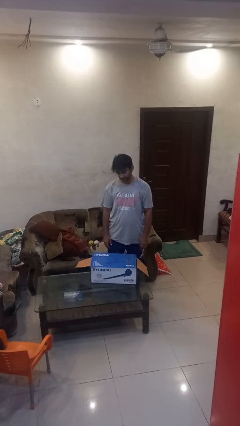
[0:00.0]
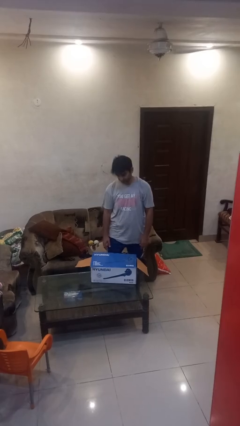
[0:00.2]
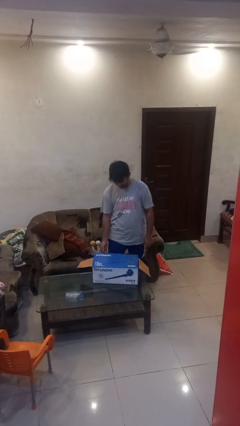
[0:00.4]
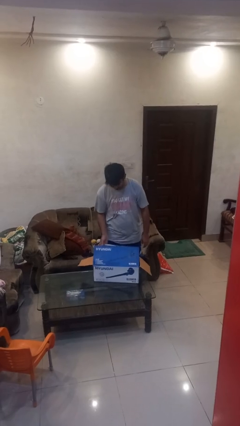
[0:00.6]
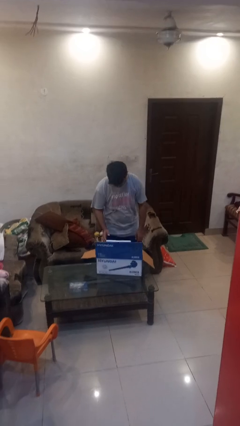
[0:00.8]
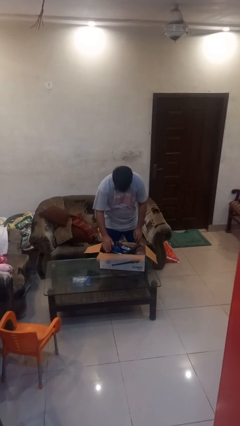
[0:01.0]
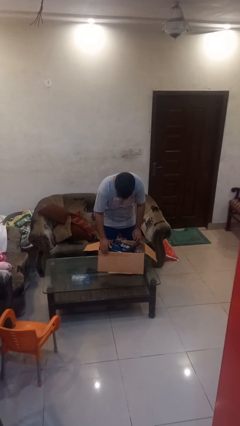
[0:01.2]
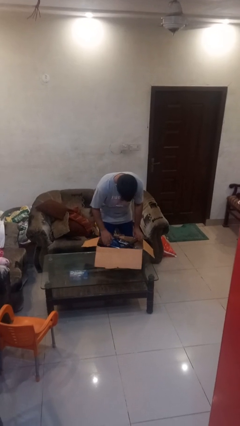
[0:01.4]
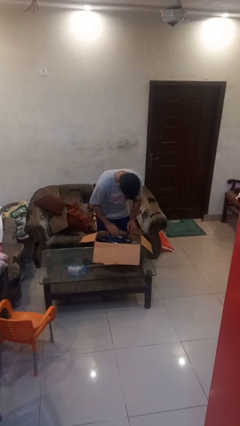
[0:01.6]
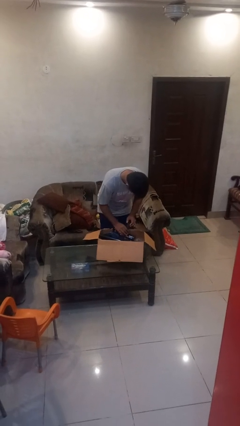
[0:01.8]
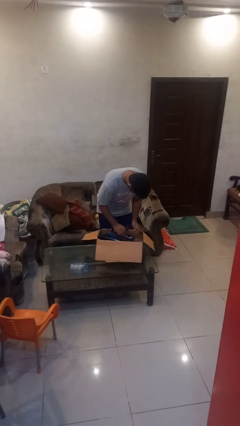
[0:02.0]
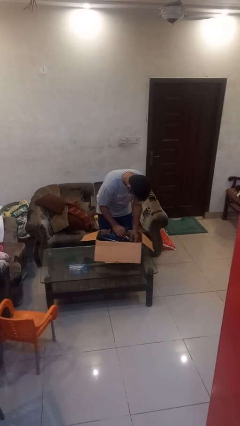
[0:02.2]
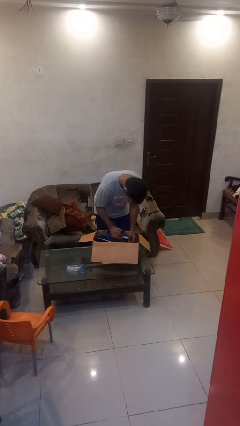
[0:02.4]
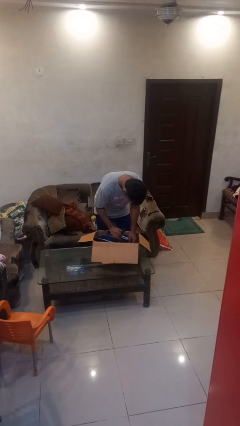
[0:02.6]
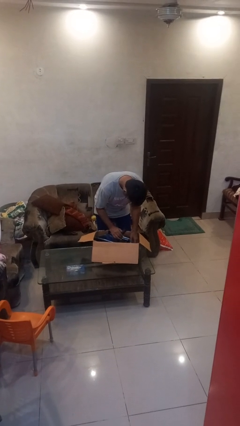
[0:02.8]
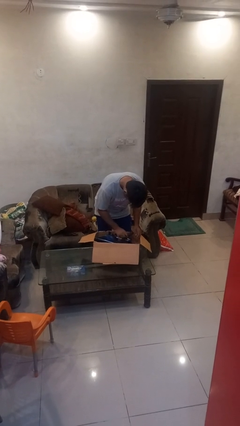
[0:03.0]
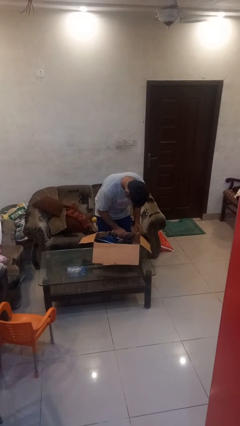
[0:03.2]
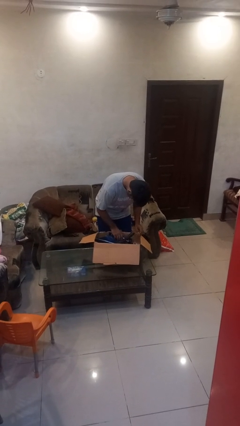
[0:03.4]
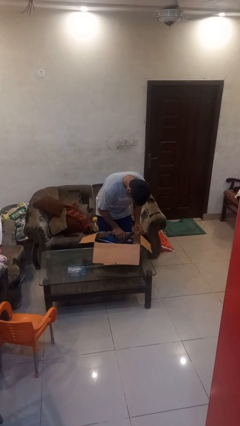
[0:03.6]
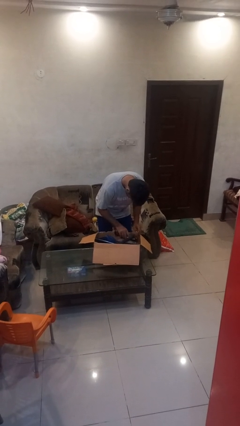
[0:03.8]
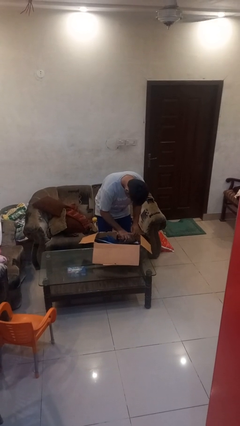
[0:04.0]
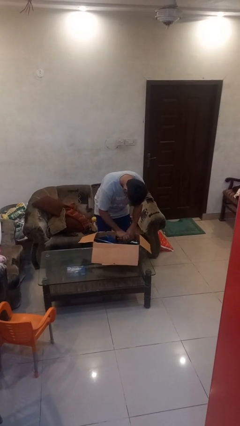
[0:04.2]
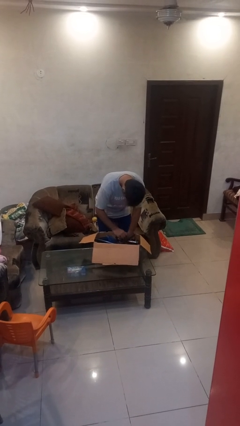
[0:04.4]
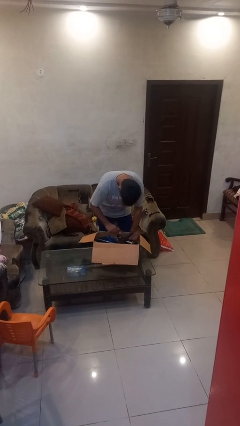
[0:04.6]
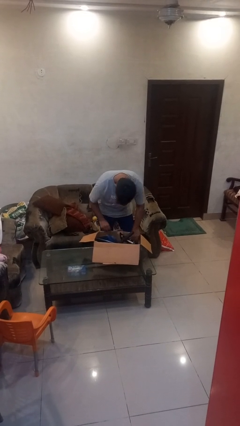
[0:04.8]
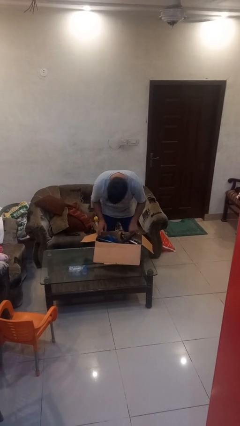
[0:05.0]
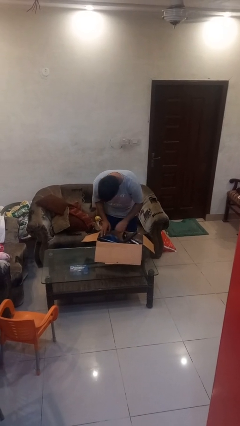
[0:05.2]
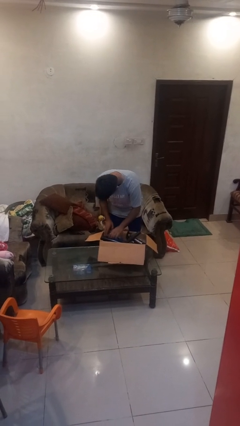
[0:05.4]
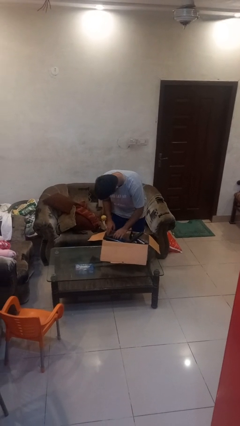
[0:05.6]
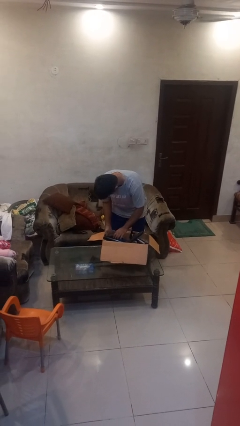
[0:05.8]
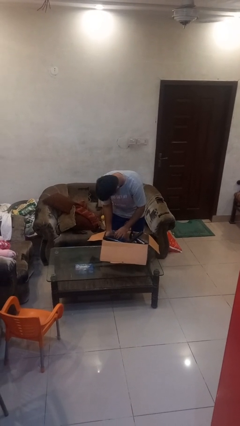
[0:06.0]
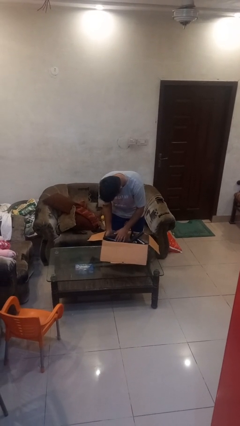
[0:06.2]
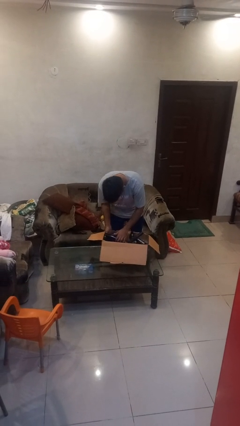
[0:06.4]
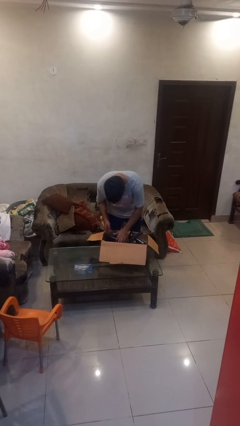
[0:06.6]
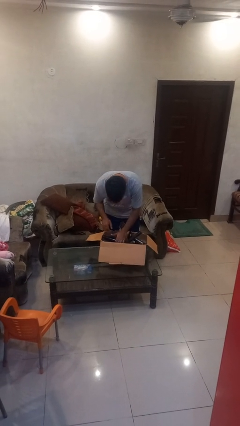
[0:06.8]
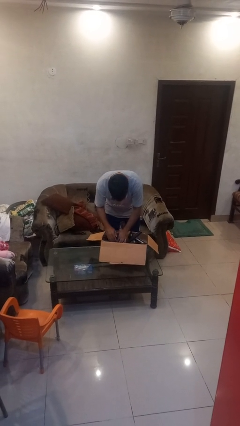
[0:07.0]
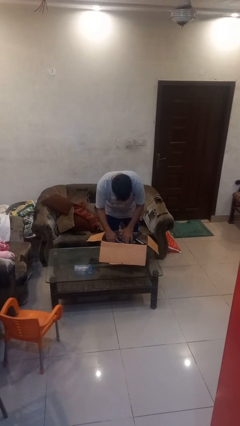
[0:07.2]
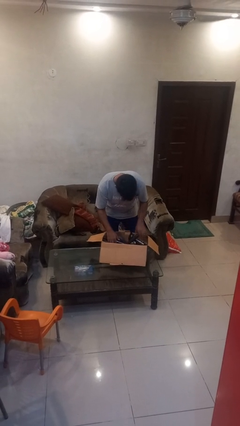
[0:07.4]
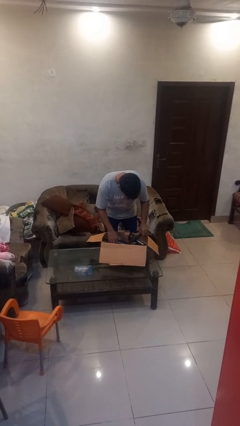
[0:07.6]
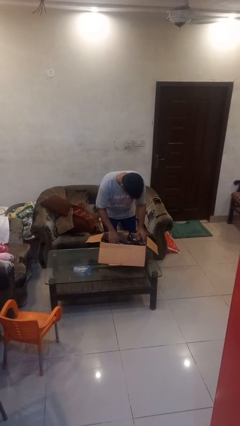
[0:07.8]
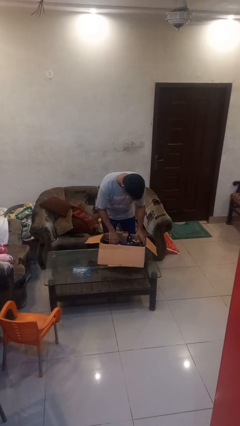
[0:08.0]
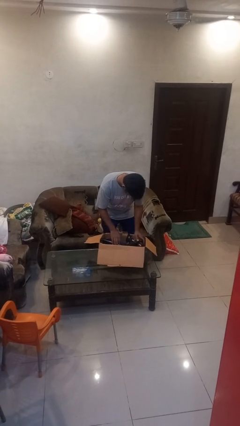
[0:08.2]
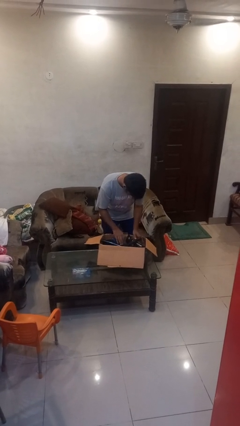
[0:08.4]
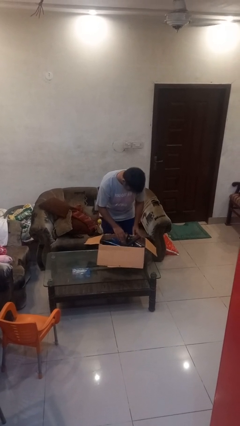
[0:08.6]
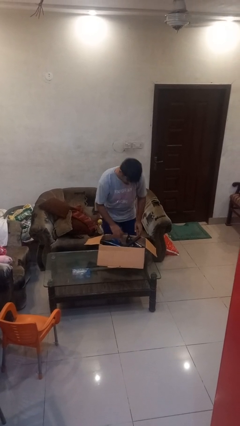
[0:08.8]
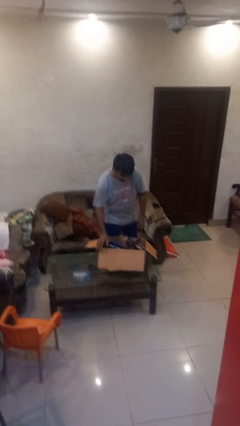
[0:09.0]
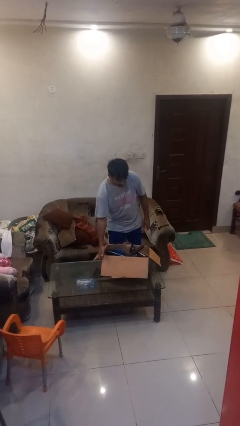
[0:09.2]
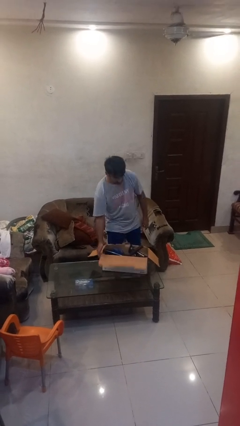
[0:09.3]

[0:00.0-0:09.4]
person searches in box

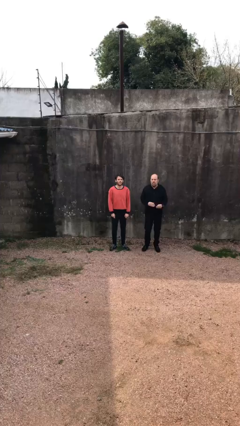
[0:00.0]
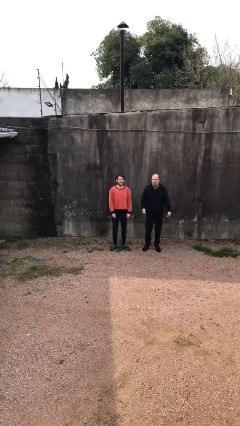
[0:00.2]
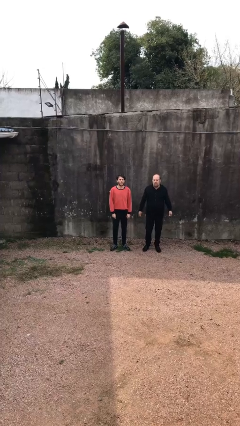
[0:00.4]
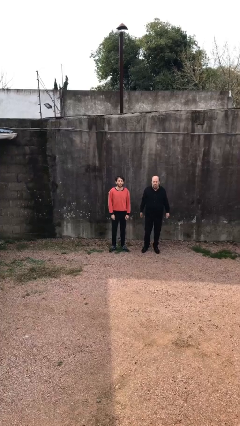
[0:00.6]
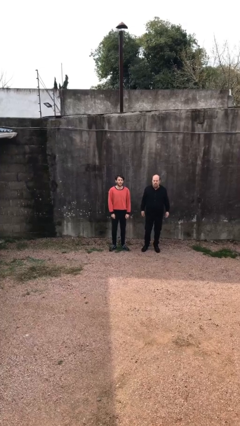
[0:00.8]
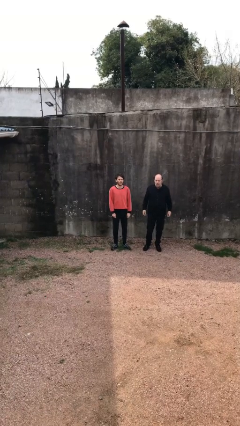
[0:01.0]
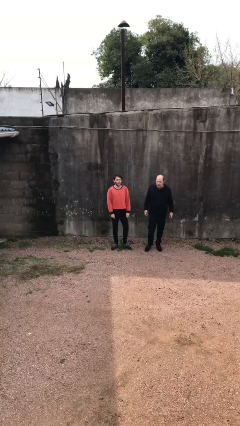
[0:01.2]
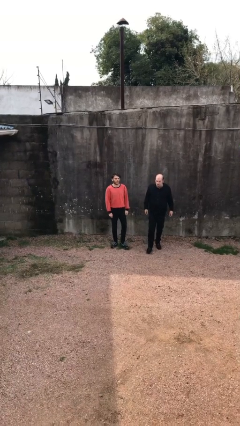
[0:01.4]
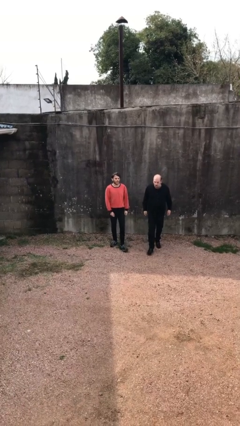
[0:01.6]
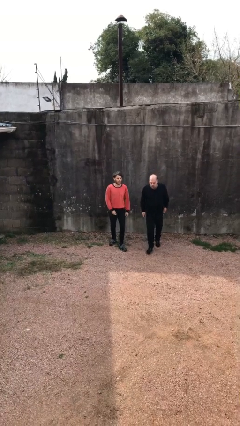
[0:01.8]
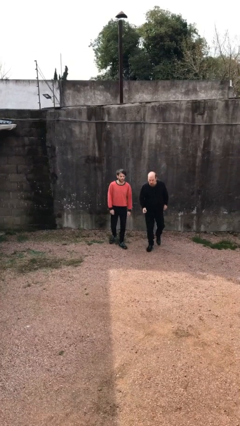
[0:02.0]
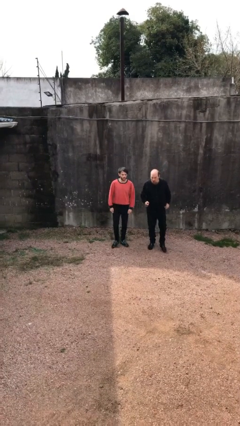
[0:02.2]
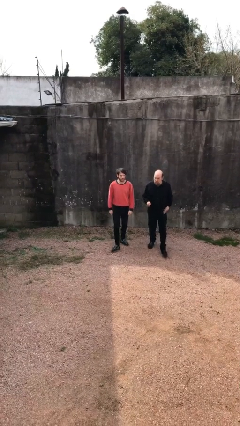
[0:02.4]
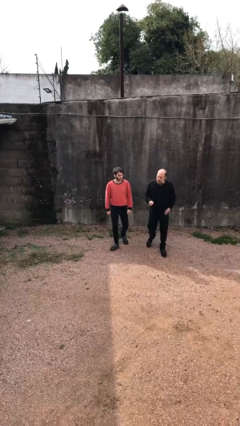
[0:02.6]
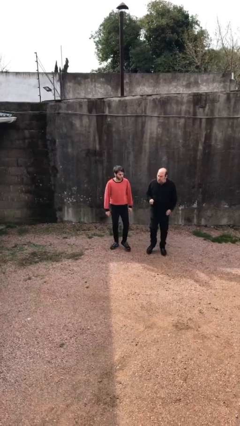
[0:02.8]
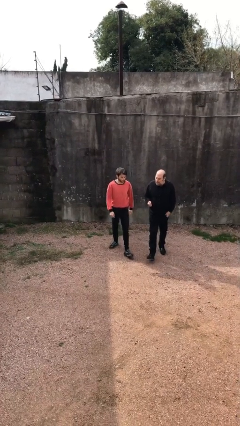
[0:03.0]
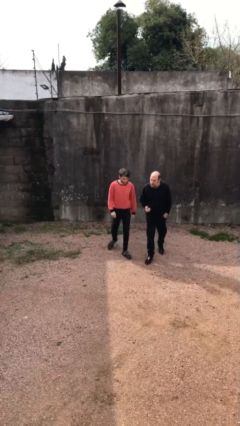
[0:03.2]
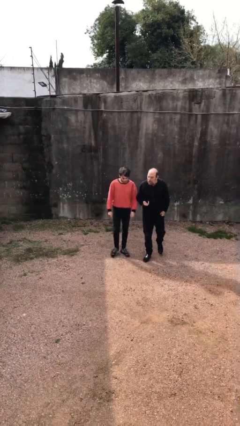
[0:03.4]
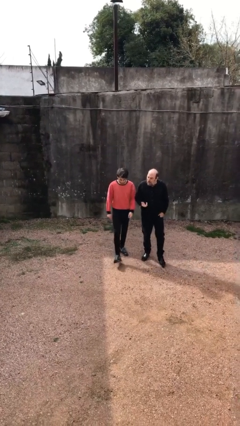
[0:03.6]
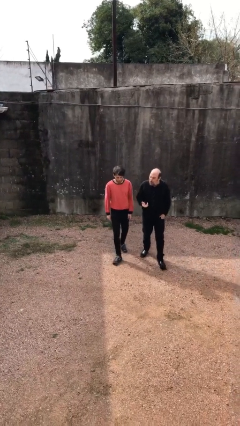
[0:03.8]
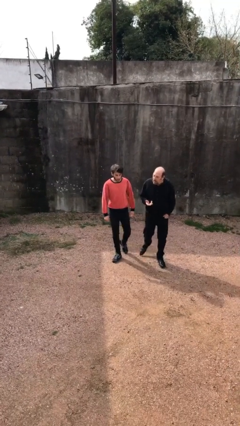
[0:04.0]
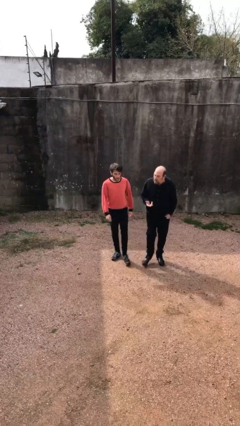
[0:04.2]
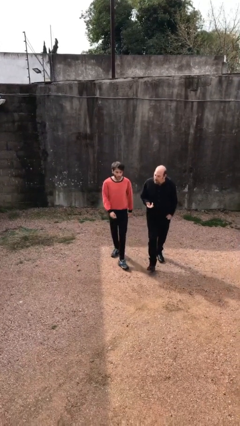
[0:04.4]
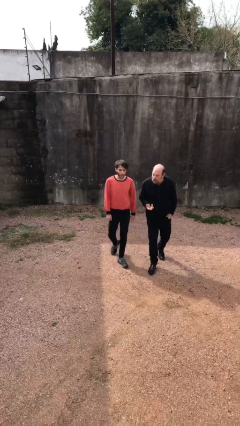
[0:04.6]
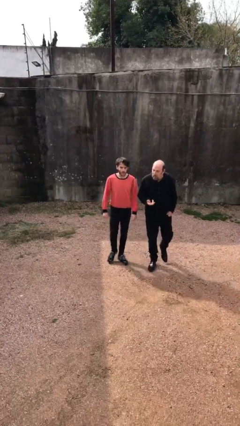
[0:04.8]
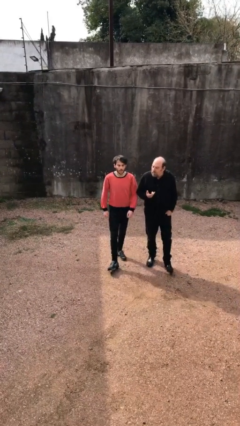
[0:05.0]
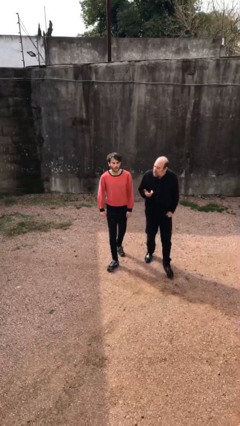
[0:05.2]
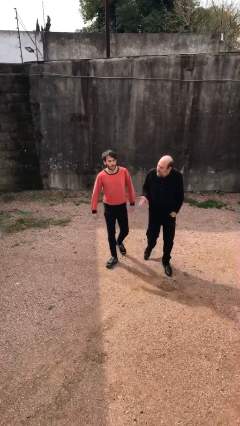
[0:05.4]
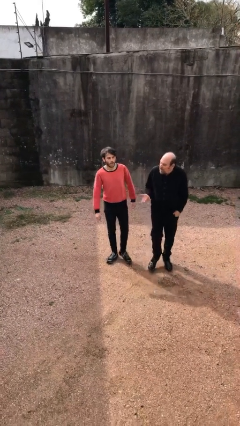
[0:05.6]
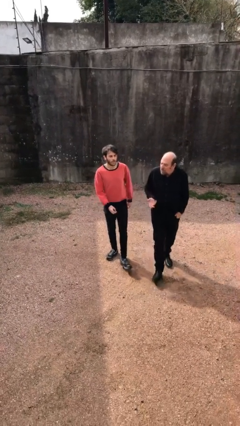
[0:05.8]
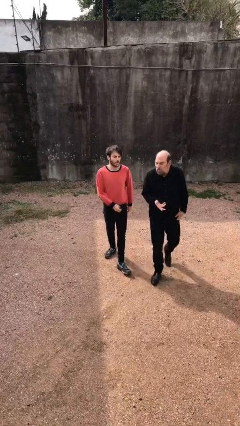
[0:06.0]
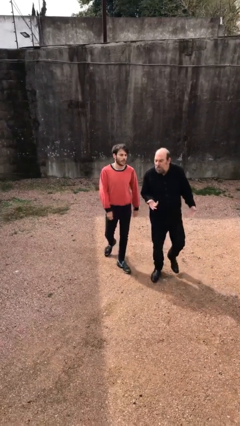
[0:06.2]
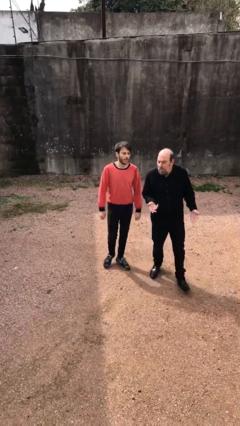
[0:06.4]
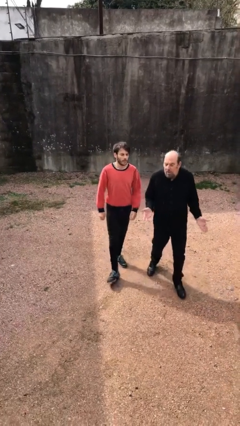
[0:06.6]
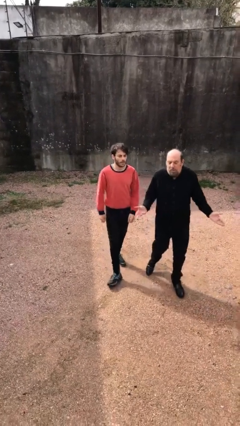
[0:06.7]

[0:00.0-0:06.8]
person talks to person

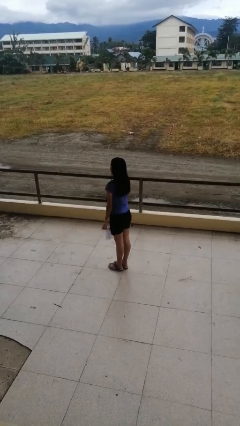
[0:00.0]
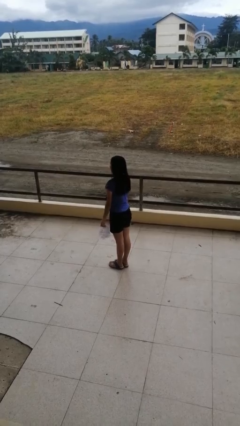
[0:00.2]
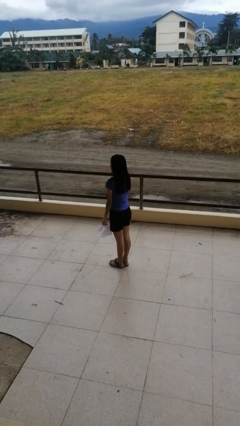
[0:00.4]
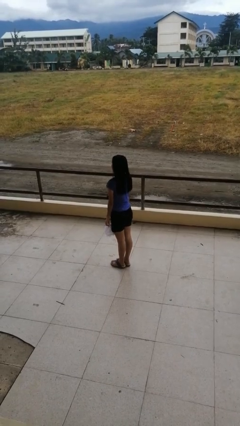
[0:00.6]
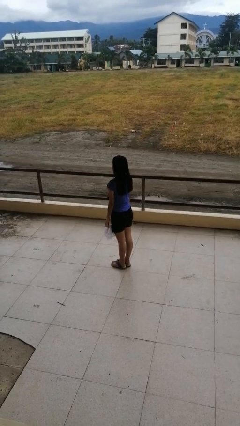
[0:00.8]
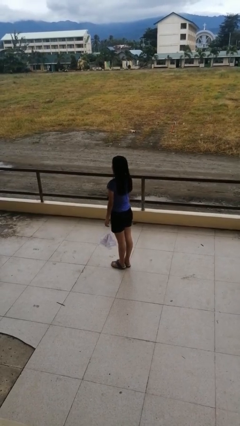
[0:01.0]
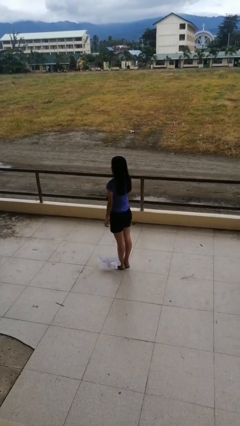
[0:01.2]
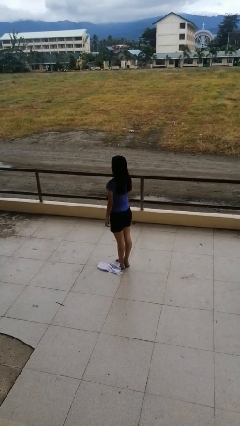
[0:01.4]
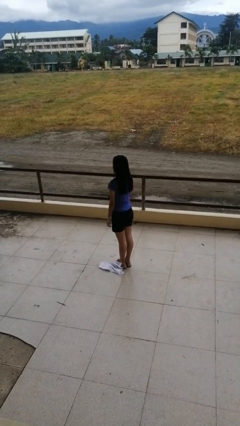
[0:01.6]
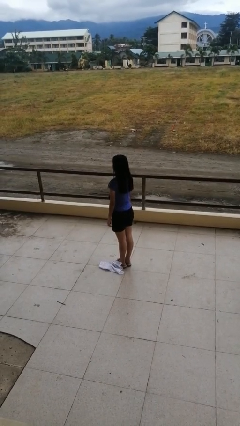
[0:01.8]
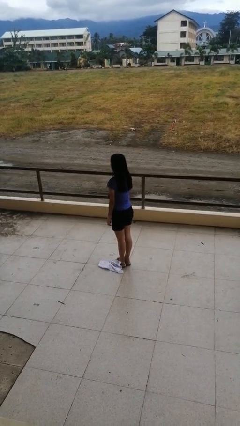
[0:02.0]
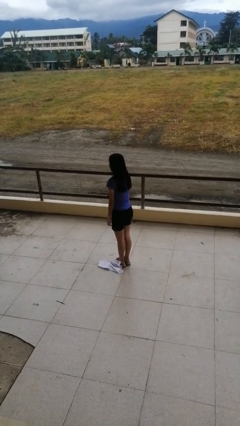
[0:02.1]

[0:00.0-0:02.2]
person drops object
